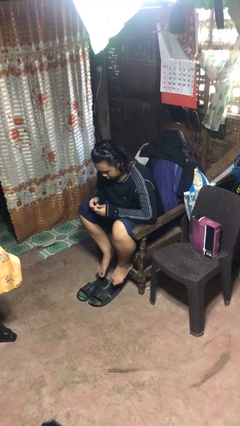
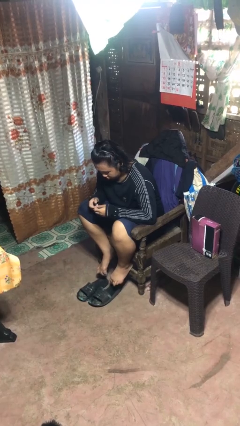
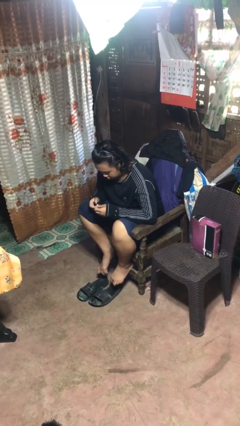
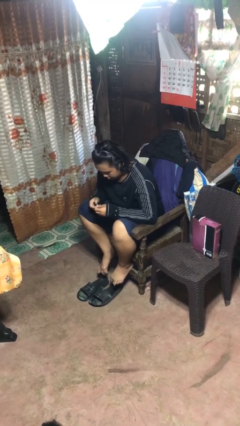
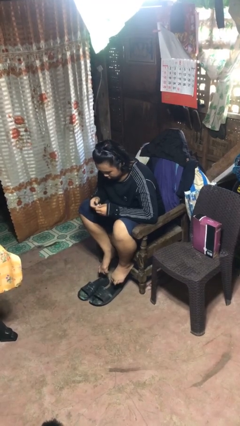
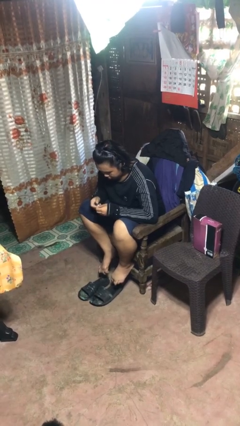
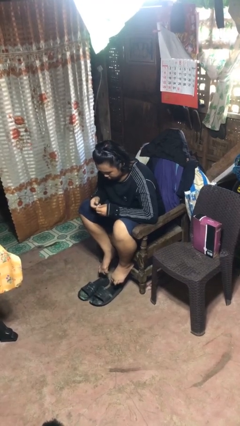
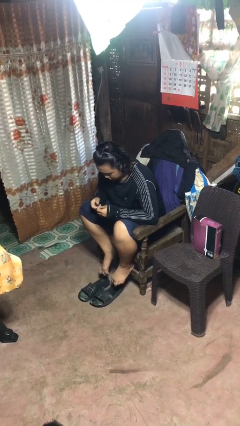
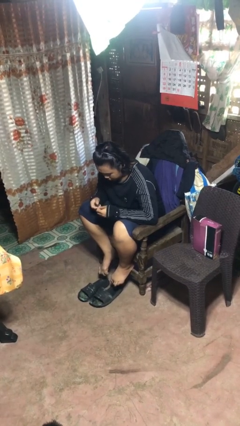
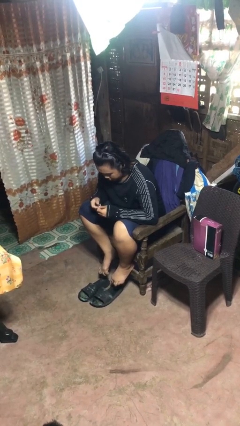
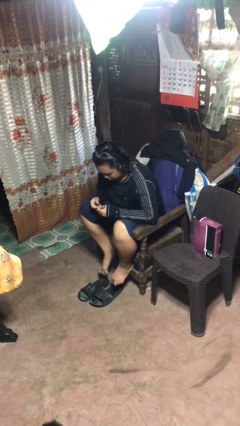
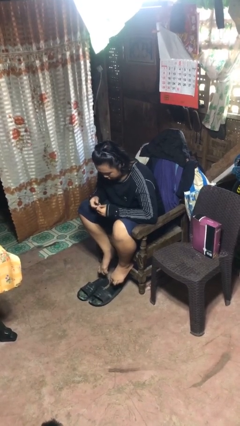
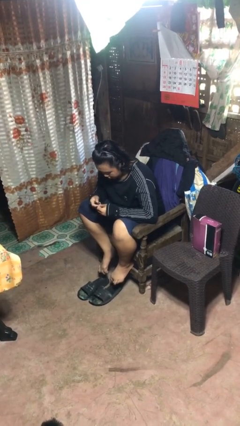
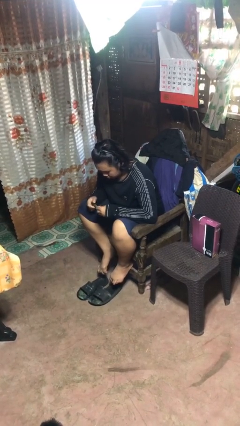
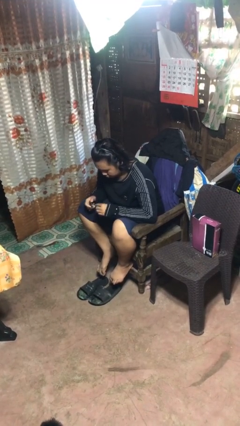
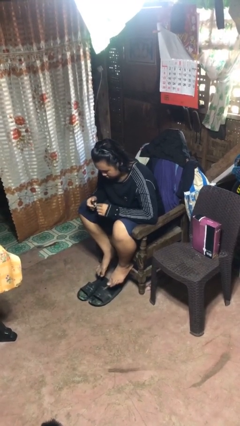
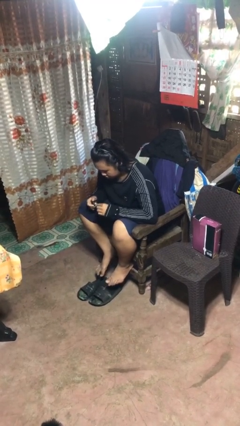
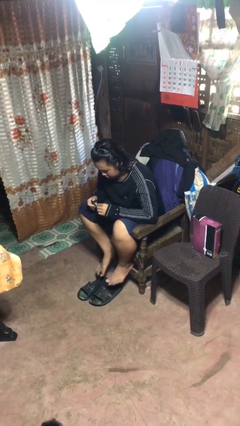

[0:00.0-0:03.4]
person clips fingernails

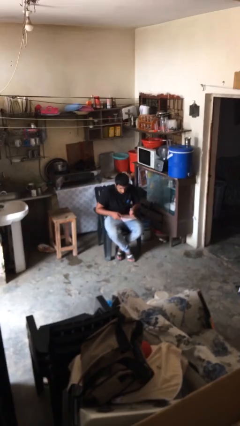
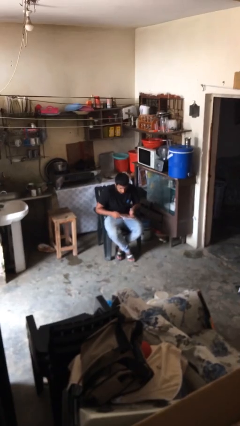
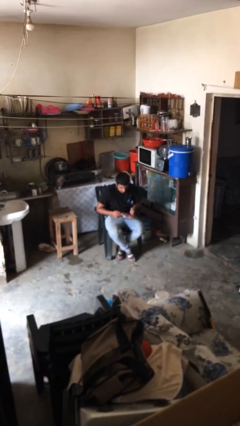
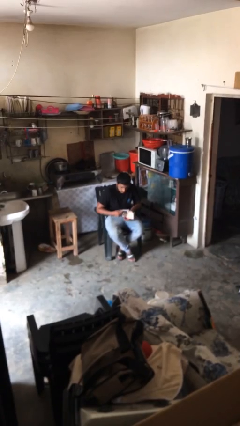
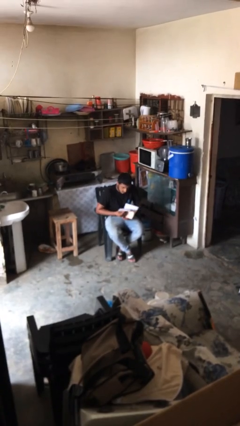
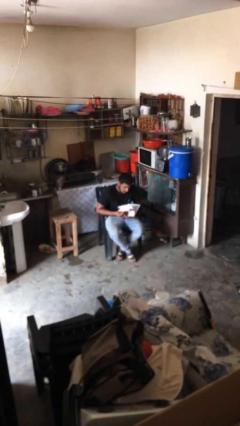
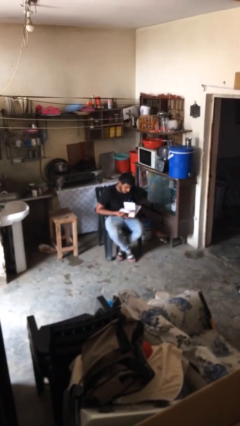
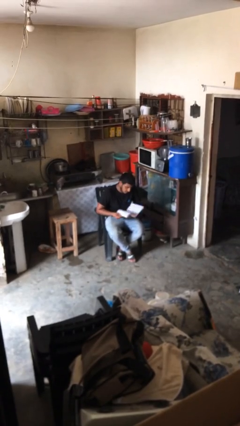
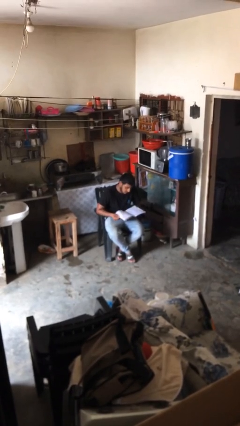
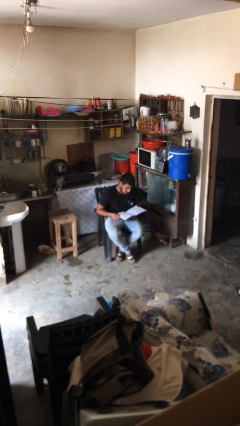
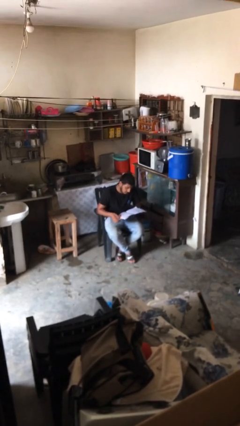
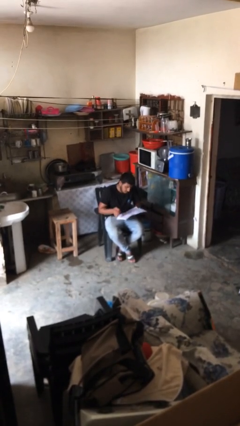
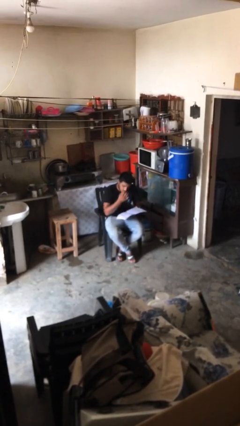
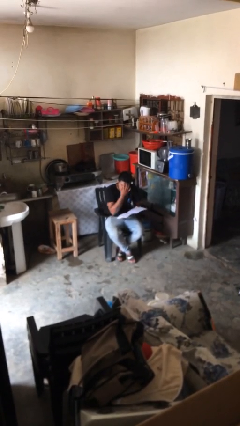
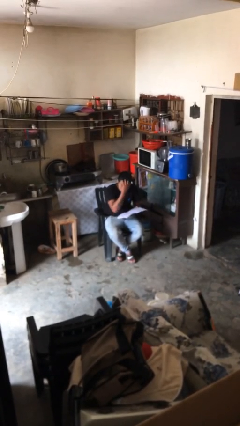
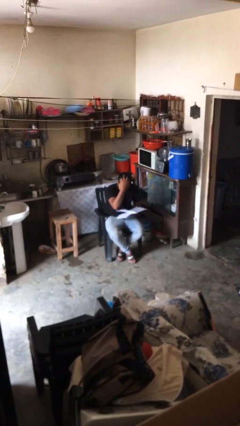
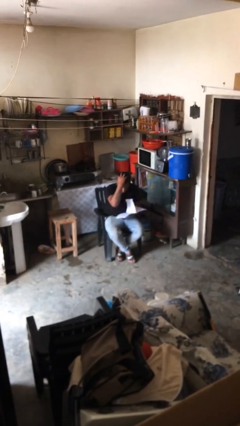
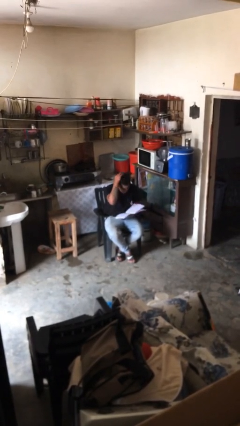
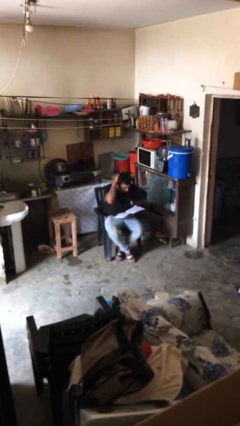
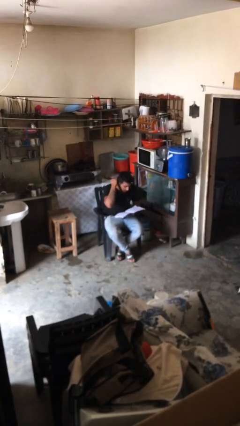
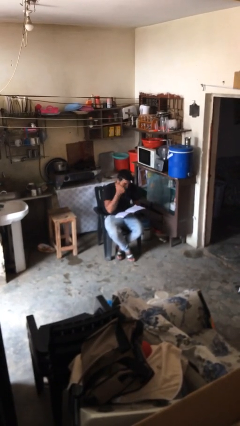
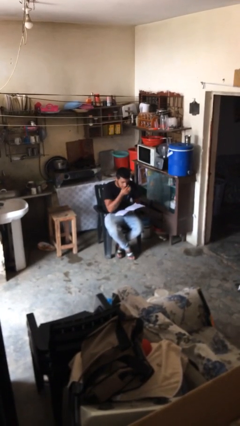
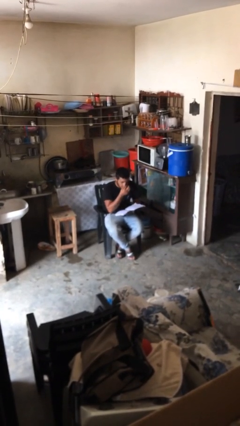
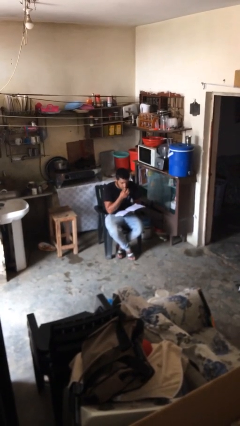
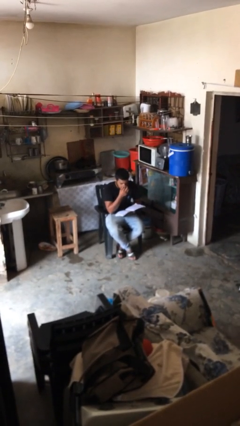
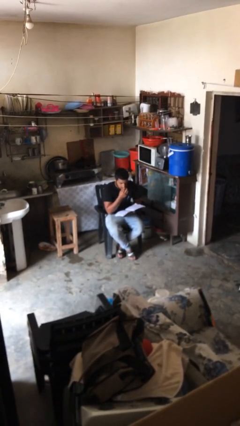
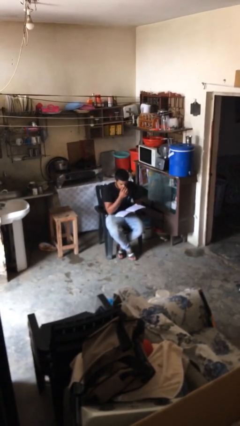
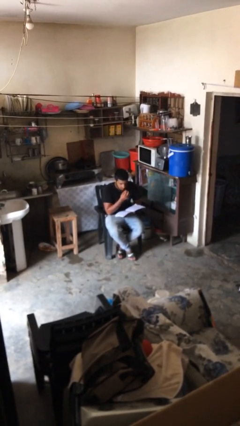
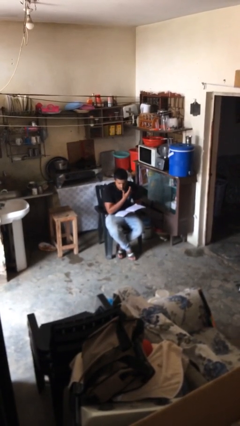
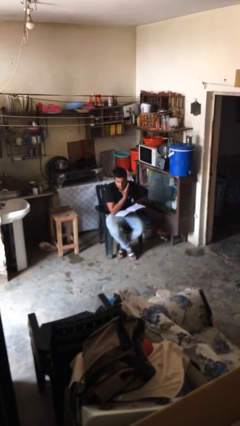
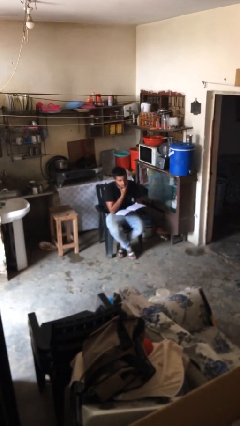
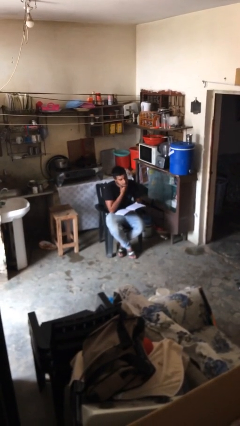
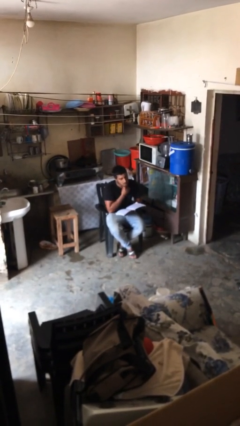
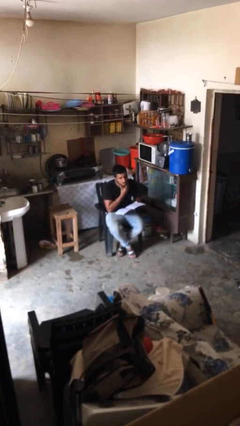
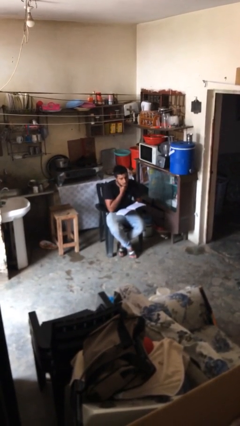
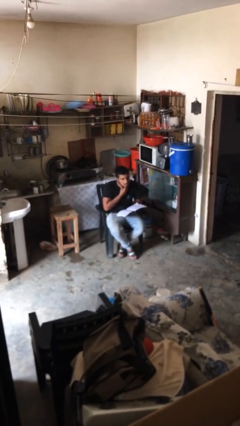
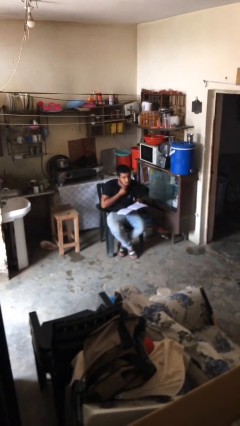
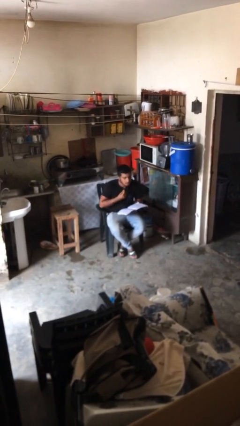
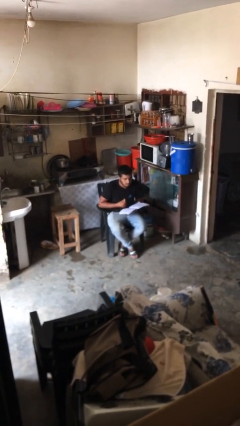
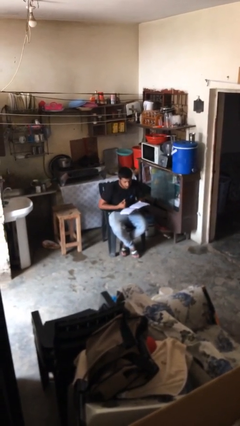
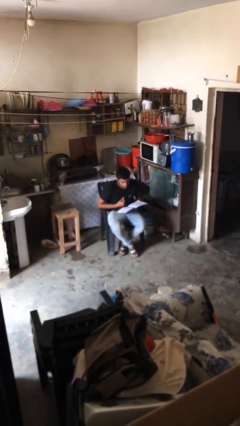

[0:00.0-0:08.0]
person reads document

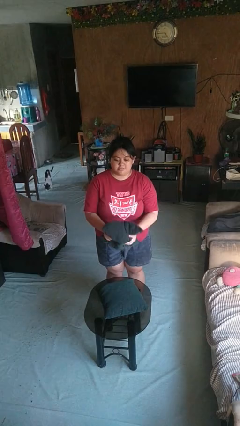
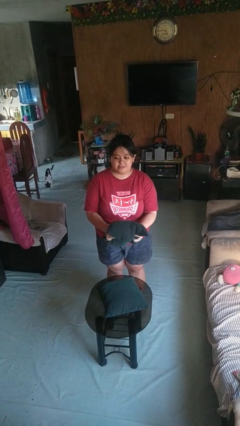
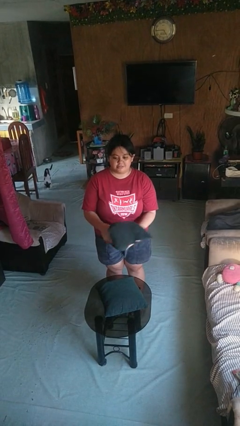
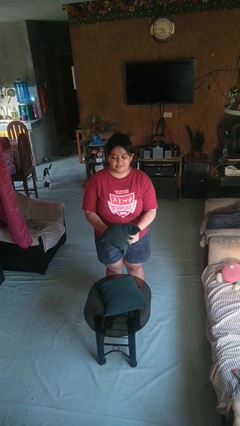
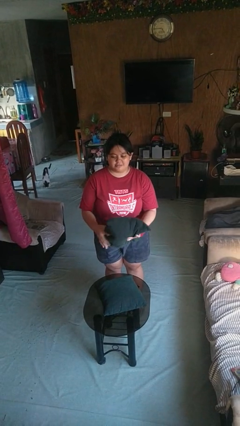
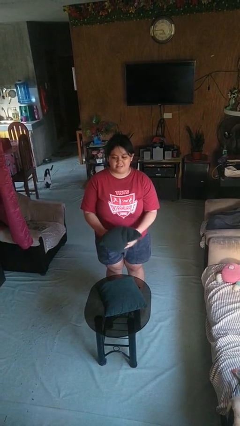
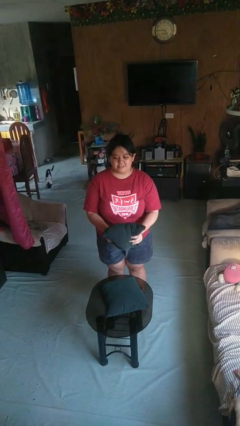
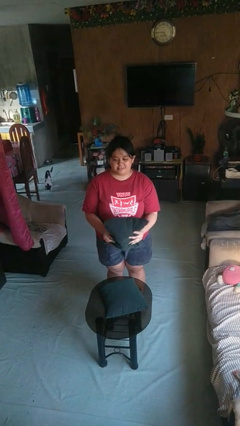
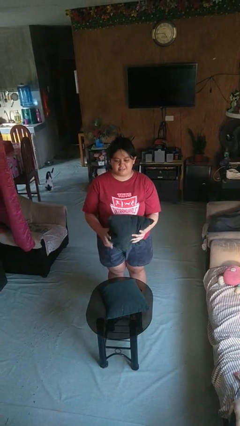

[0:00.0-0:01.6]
person squeezes object

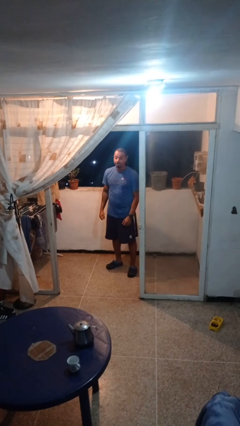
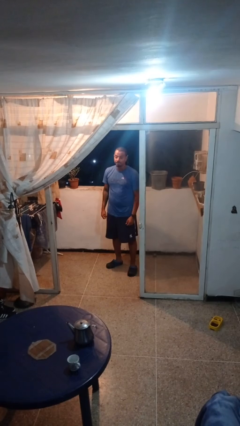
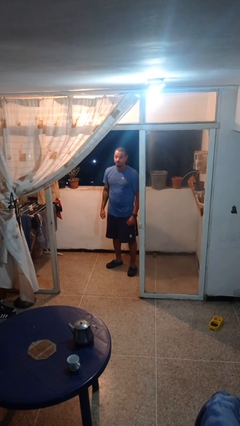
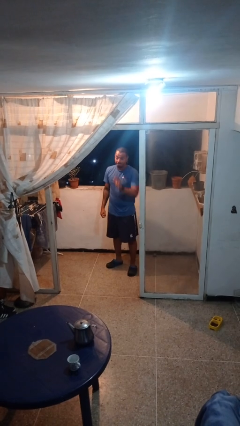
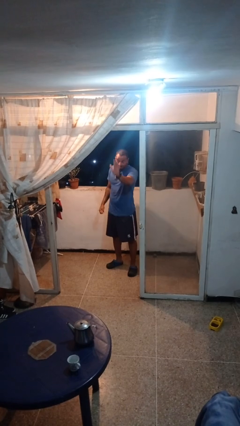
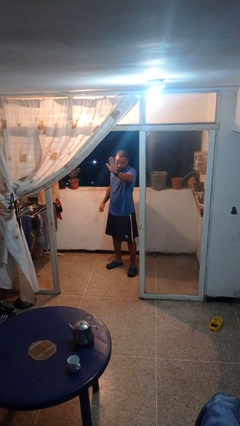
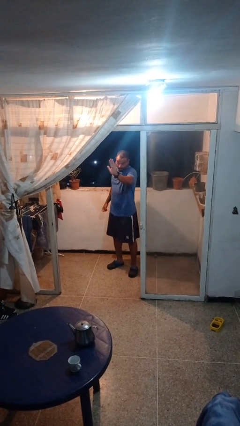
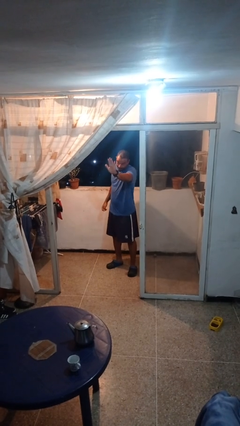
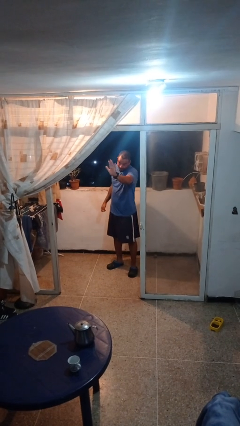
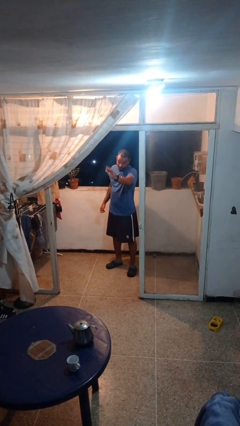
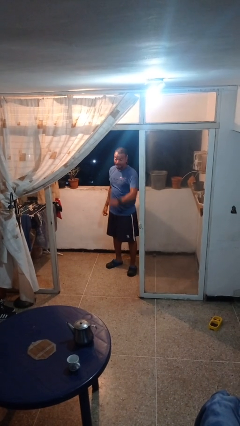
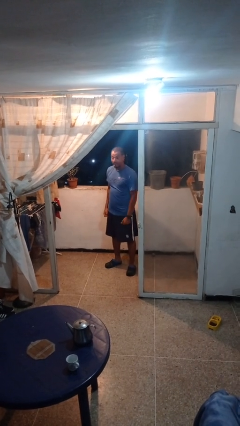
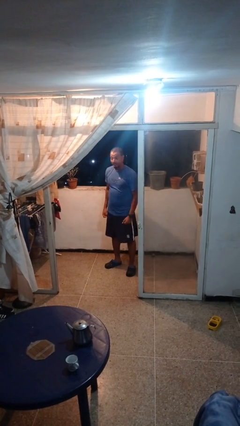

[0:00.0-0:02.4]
person gestures stop

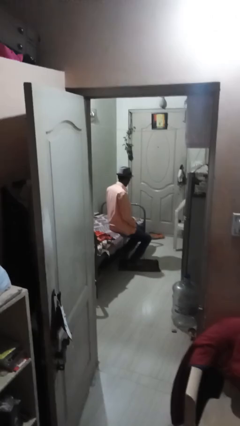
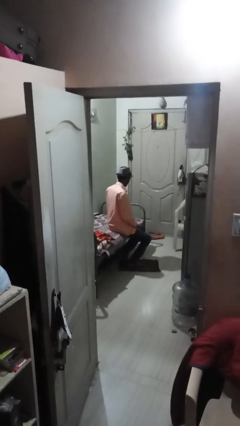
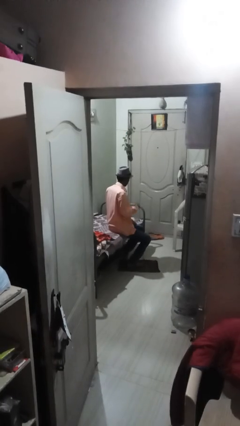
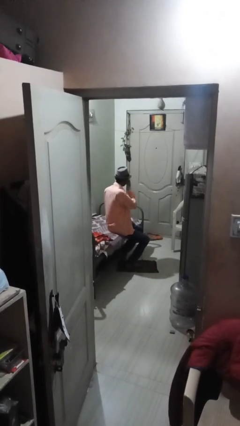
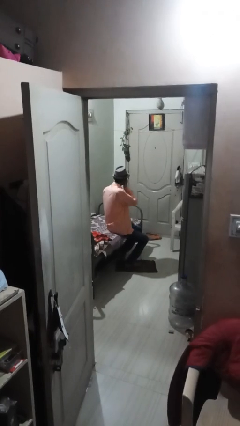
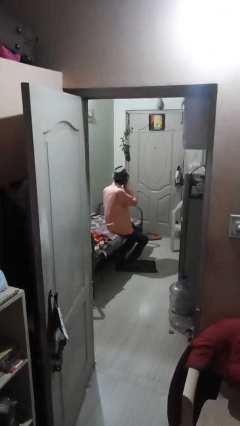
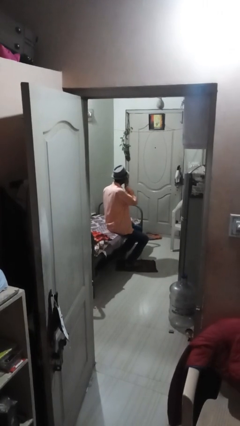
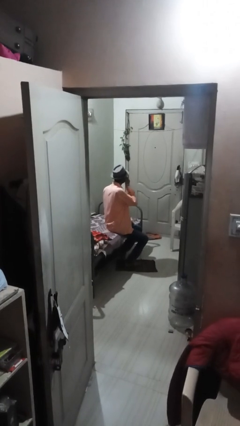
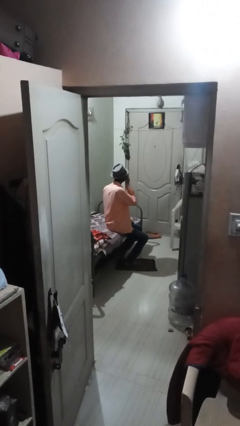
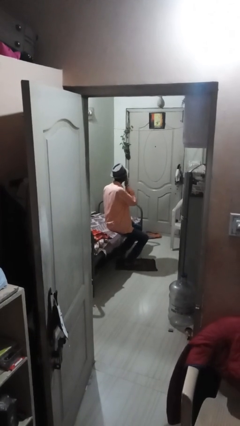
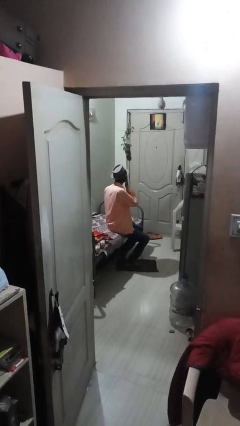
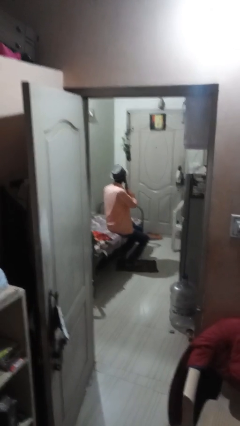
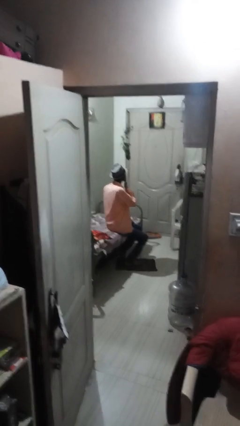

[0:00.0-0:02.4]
person covers face with hands
